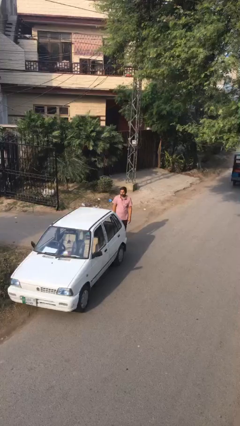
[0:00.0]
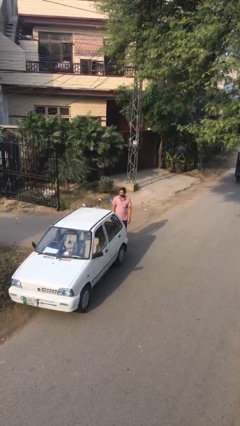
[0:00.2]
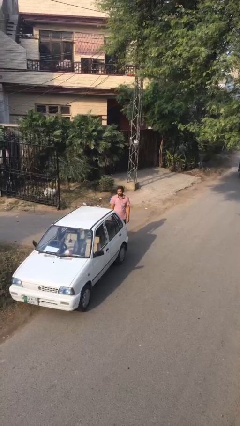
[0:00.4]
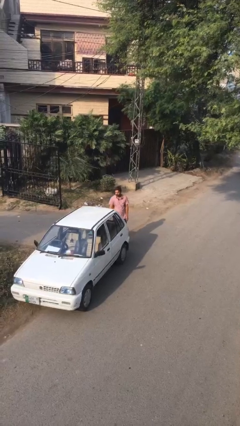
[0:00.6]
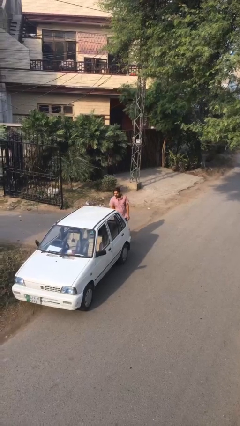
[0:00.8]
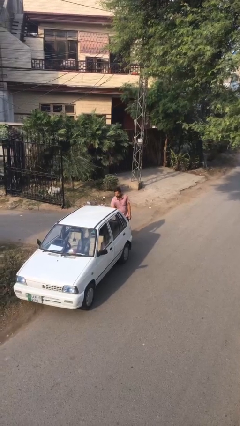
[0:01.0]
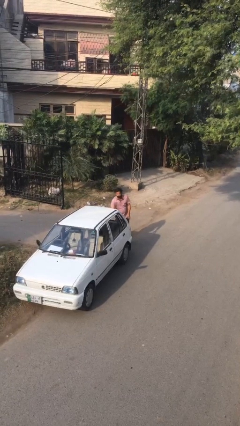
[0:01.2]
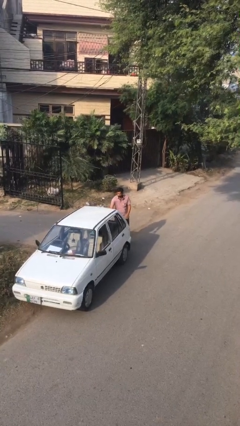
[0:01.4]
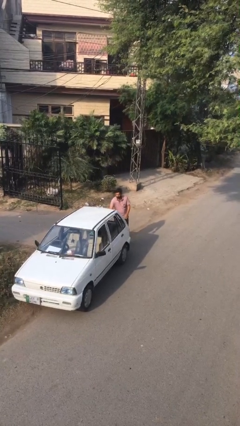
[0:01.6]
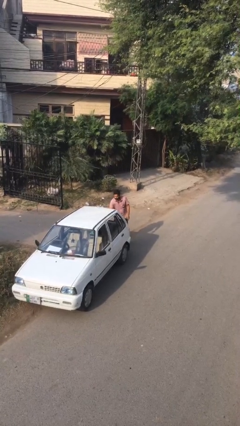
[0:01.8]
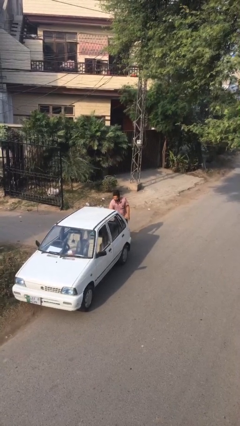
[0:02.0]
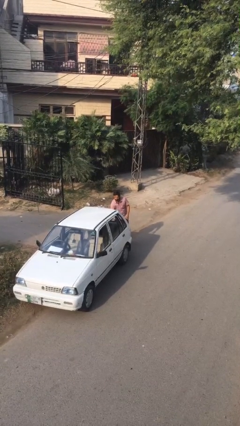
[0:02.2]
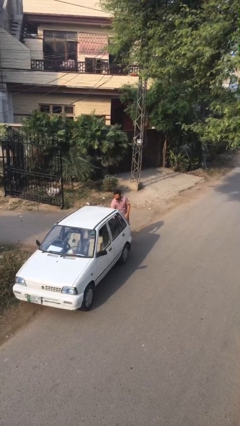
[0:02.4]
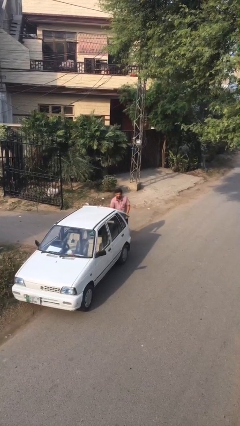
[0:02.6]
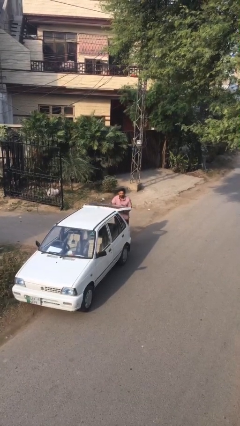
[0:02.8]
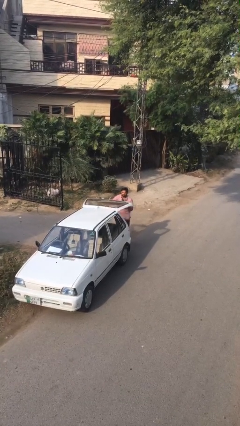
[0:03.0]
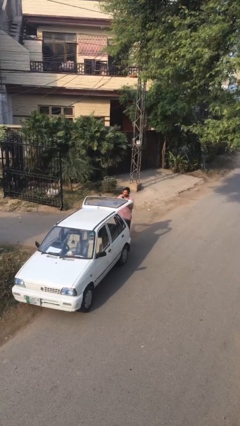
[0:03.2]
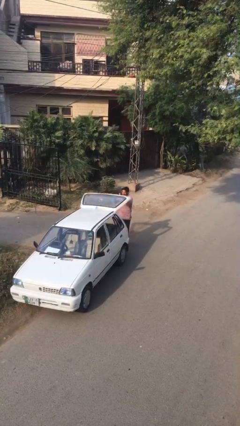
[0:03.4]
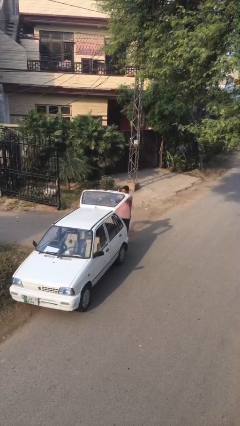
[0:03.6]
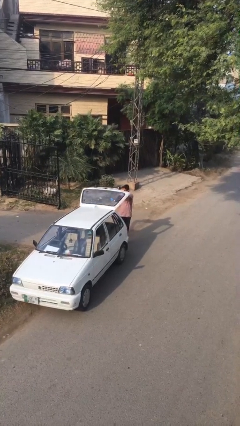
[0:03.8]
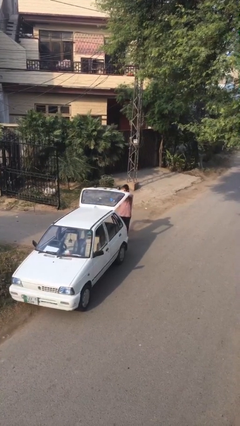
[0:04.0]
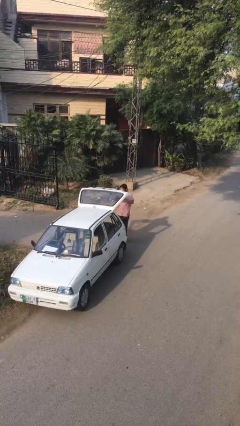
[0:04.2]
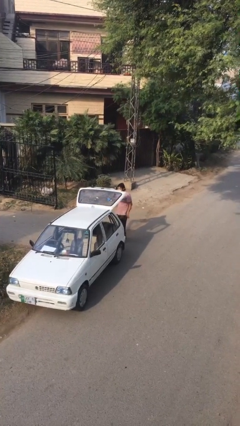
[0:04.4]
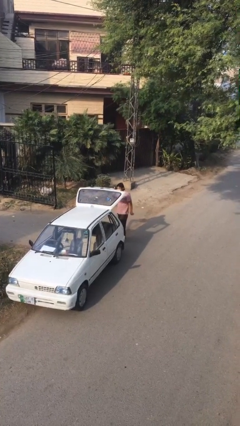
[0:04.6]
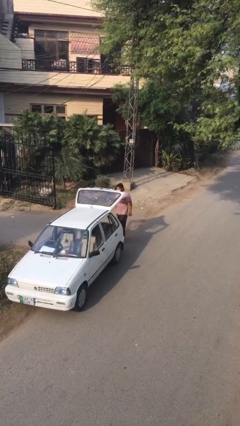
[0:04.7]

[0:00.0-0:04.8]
person opens car trunk

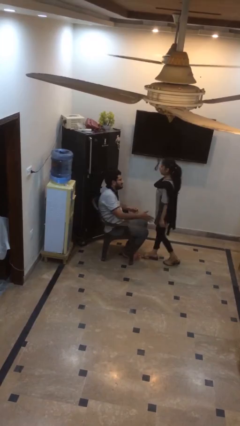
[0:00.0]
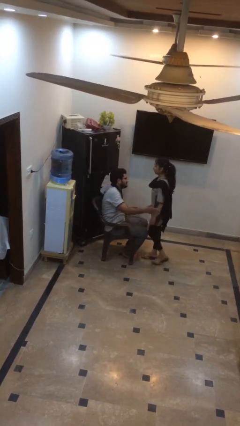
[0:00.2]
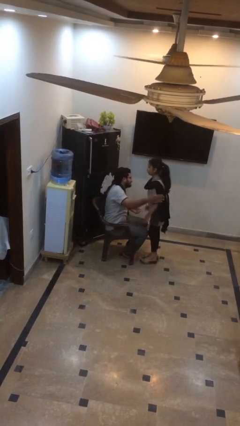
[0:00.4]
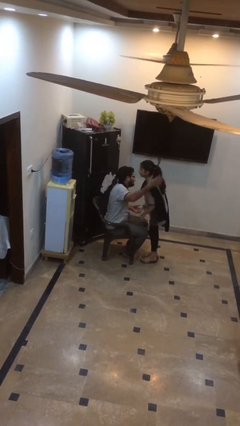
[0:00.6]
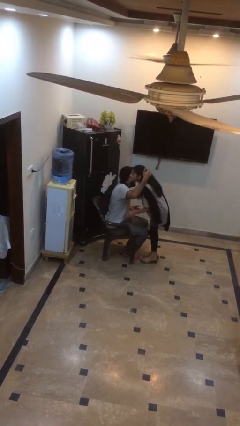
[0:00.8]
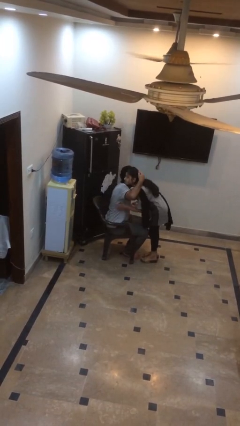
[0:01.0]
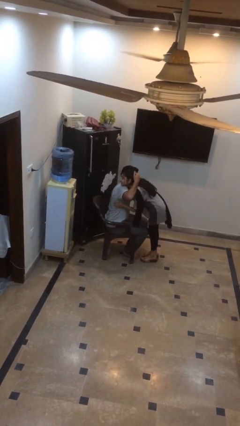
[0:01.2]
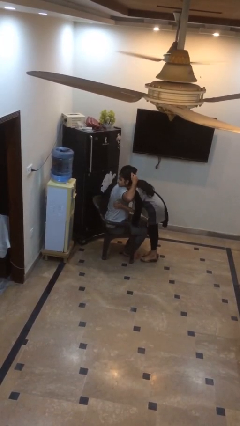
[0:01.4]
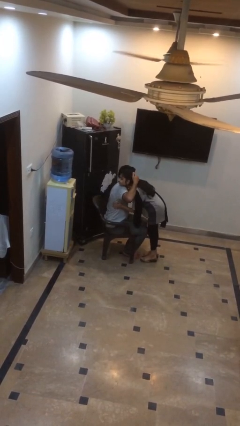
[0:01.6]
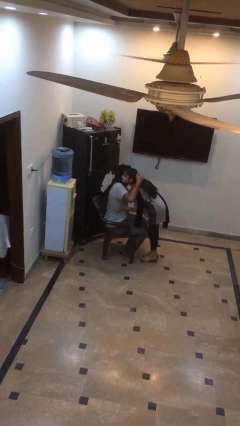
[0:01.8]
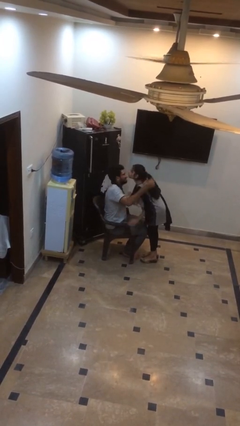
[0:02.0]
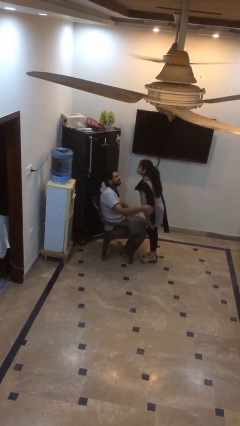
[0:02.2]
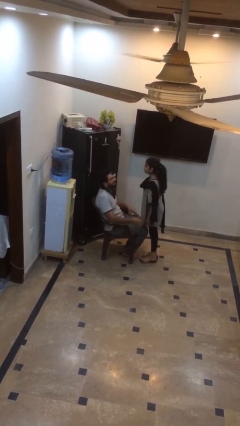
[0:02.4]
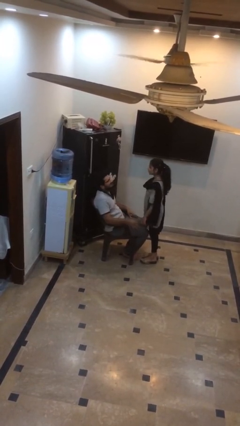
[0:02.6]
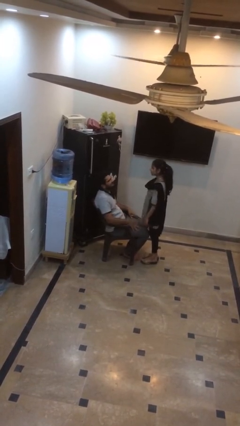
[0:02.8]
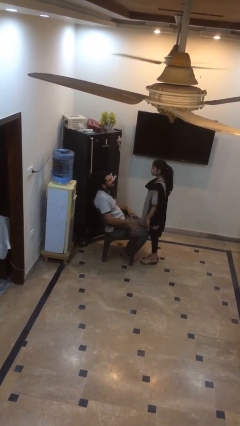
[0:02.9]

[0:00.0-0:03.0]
person embraces person

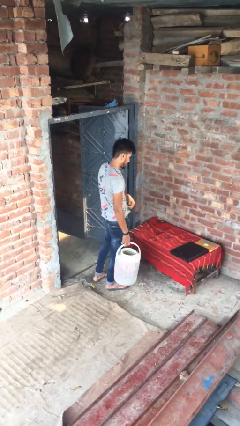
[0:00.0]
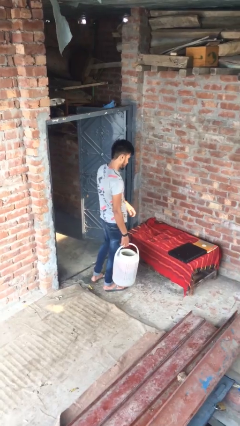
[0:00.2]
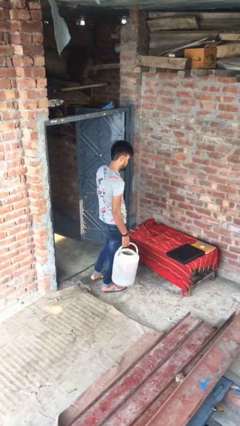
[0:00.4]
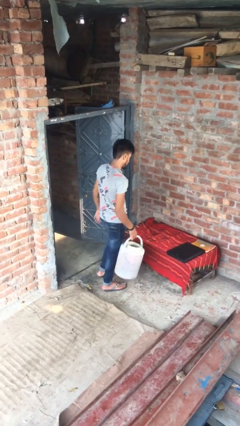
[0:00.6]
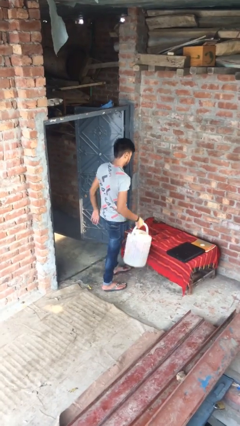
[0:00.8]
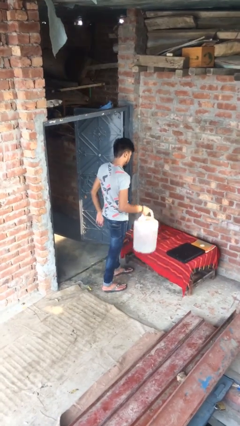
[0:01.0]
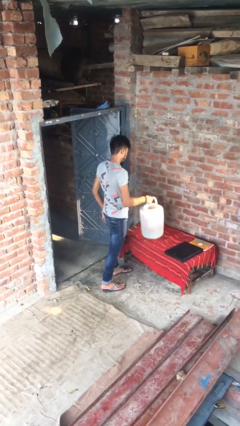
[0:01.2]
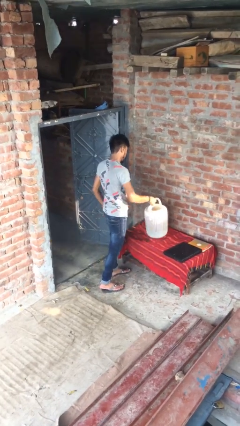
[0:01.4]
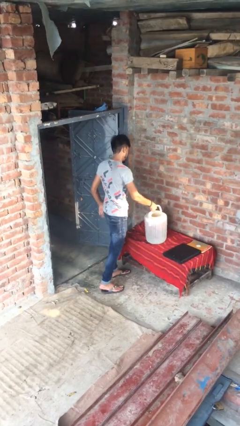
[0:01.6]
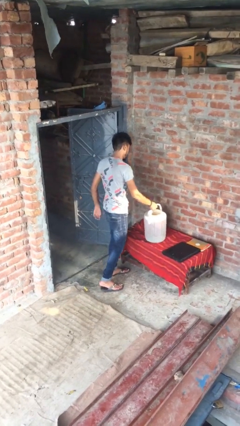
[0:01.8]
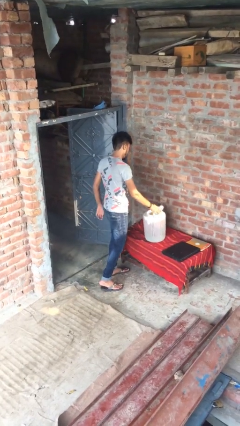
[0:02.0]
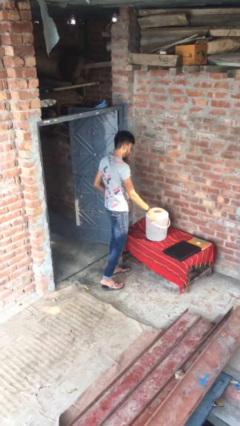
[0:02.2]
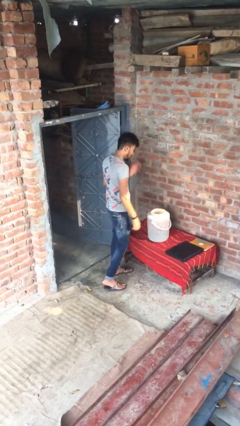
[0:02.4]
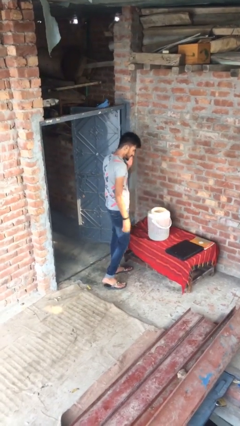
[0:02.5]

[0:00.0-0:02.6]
person puts down object on table

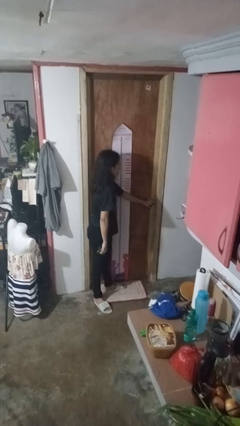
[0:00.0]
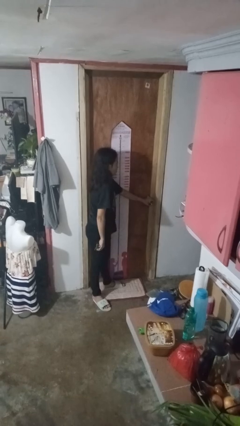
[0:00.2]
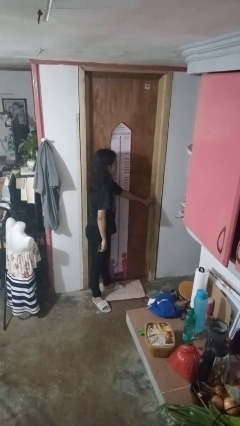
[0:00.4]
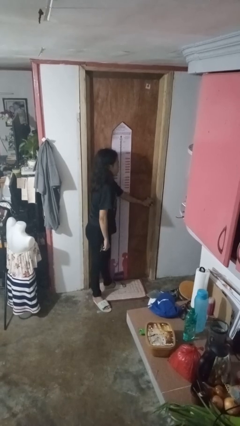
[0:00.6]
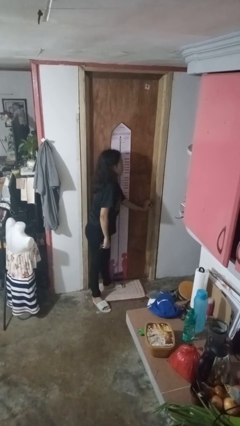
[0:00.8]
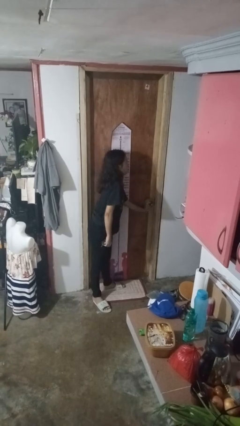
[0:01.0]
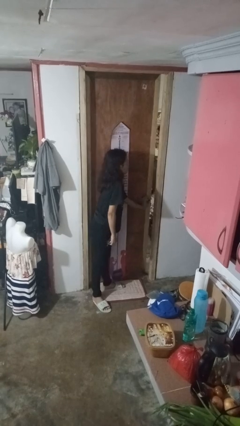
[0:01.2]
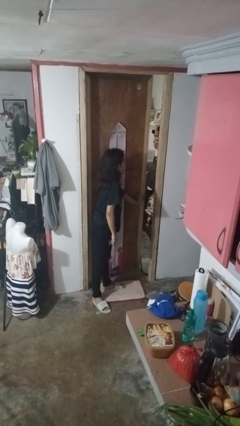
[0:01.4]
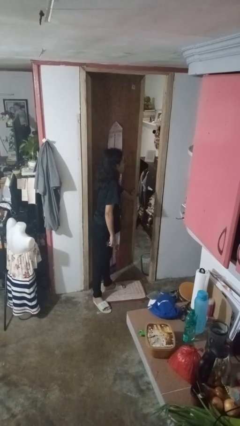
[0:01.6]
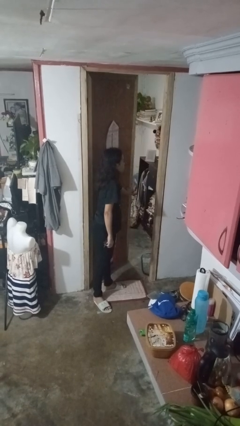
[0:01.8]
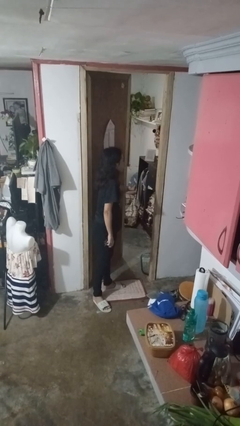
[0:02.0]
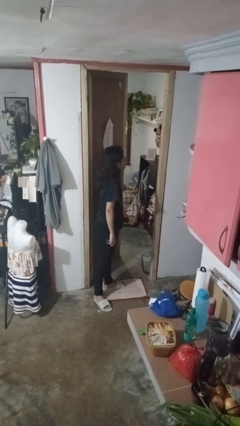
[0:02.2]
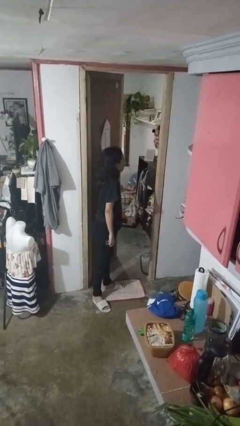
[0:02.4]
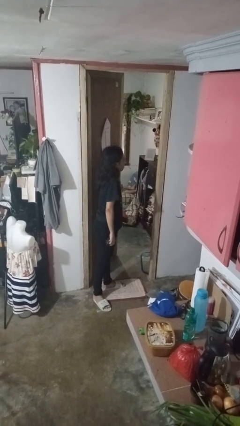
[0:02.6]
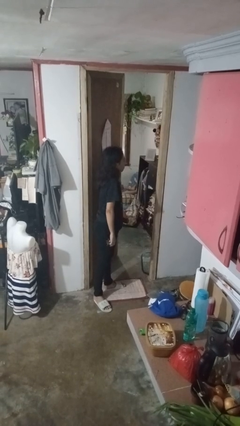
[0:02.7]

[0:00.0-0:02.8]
person opens facility door

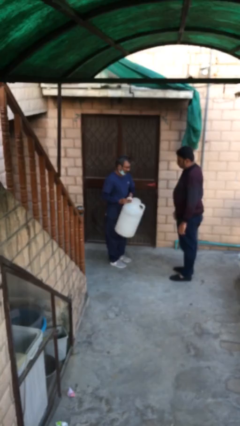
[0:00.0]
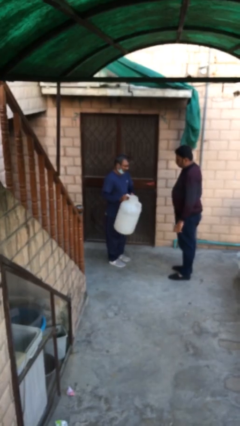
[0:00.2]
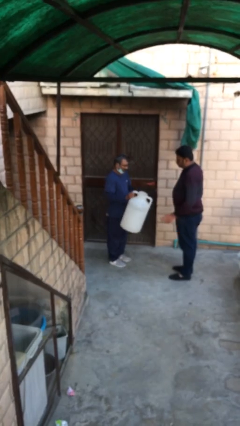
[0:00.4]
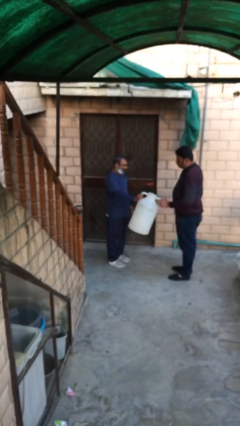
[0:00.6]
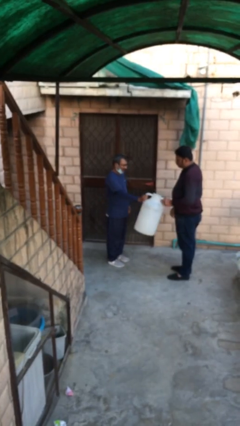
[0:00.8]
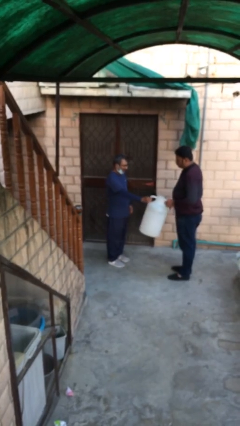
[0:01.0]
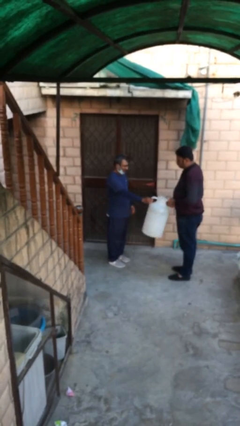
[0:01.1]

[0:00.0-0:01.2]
person transfers object to person

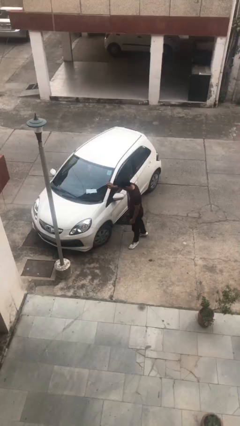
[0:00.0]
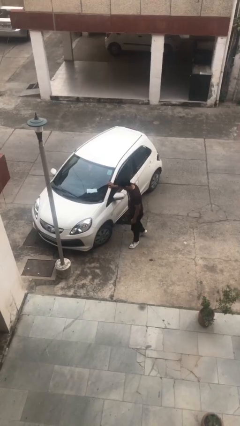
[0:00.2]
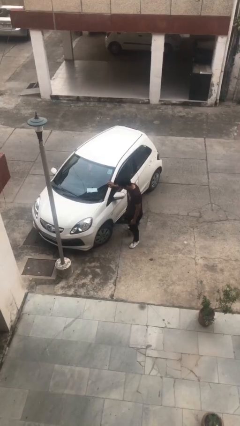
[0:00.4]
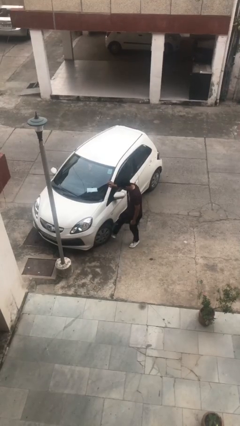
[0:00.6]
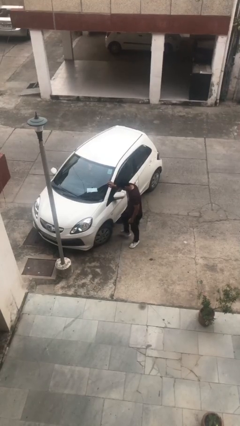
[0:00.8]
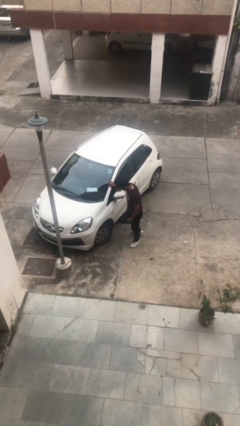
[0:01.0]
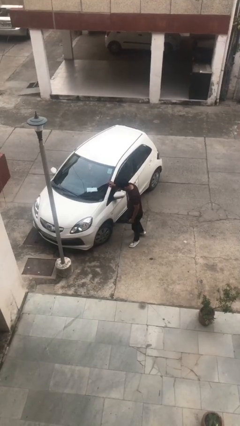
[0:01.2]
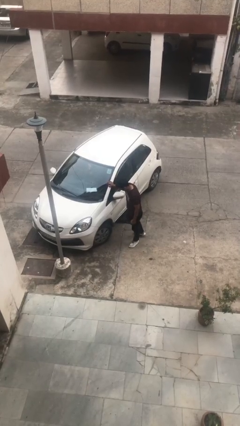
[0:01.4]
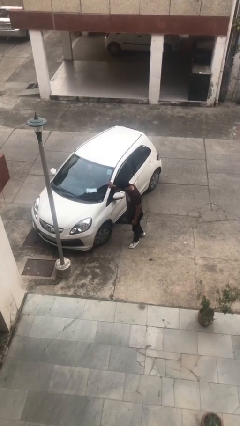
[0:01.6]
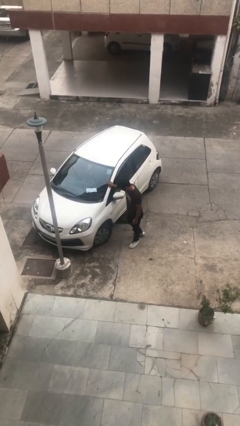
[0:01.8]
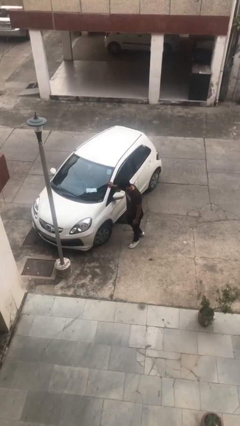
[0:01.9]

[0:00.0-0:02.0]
person kicks car tires

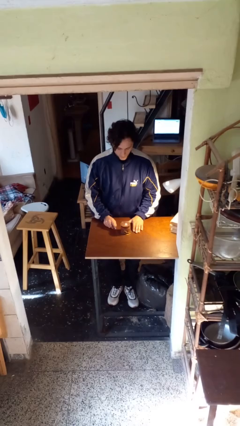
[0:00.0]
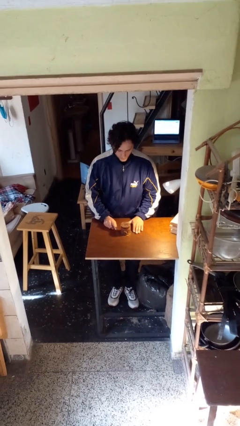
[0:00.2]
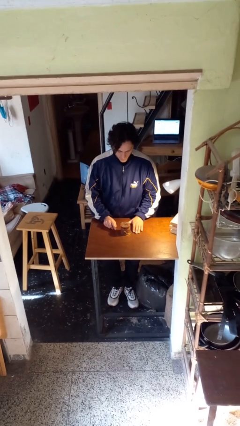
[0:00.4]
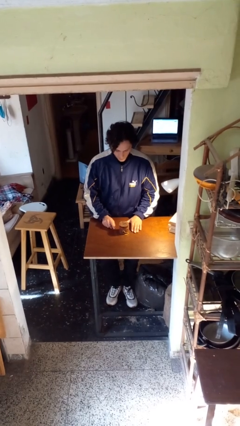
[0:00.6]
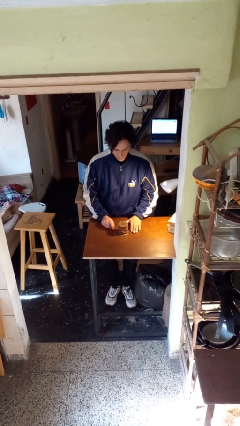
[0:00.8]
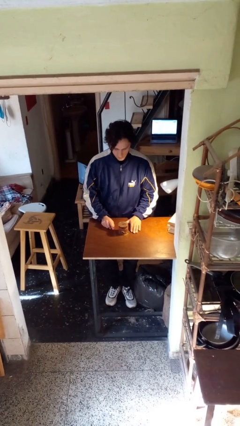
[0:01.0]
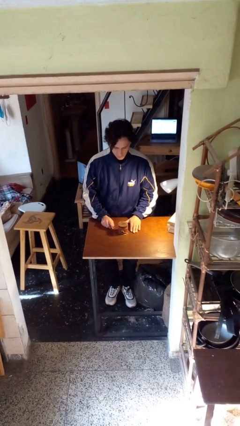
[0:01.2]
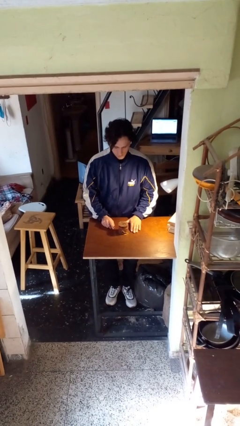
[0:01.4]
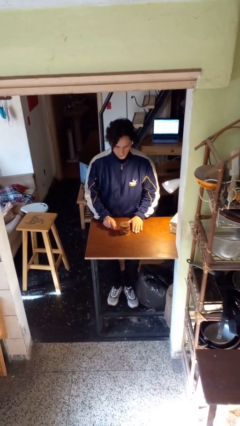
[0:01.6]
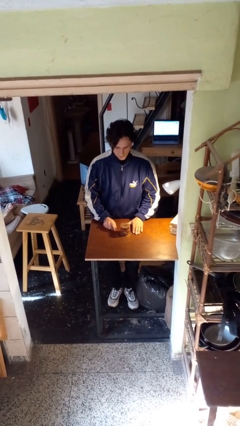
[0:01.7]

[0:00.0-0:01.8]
person extinguishes candle
